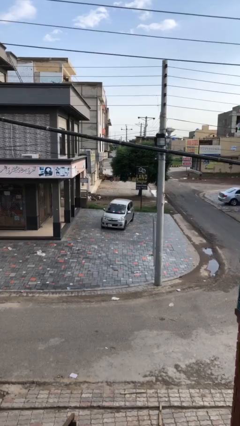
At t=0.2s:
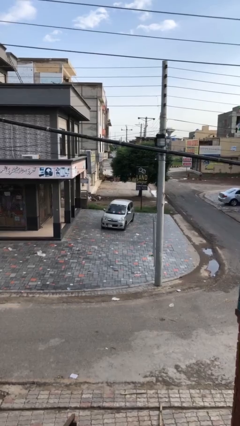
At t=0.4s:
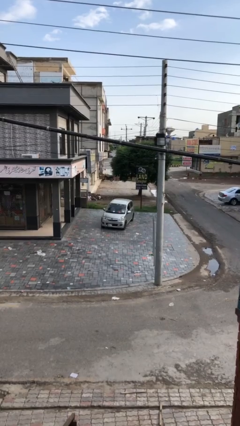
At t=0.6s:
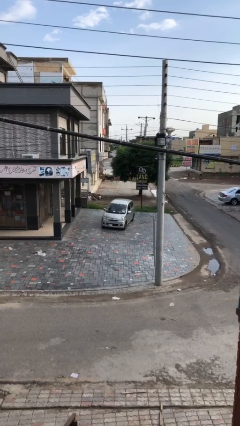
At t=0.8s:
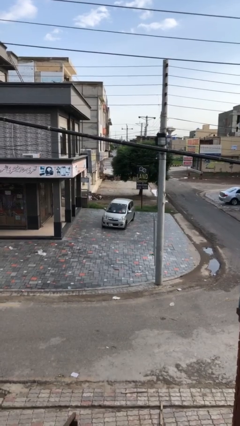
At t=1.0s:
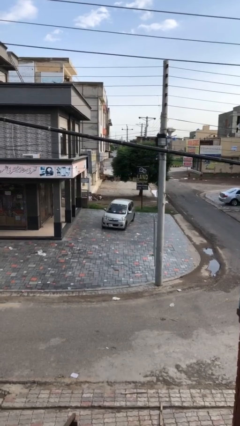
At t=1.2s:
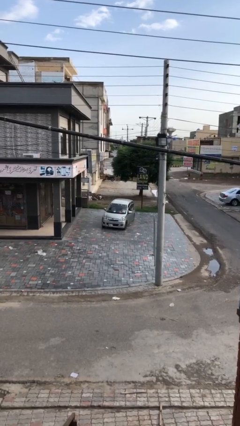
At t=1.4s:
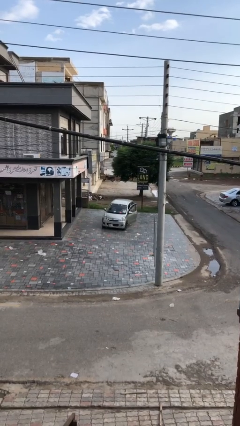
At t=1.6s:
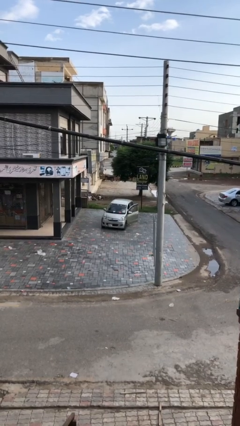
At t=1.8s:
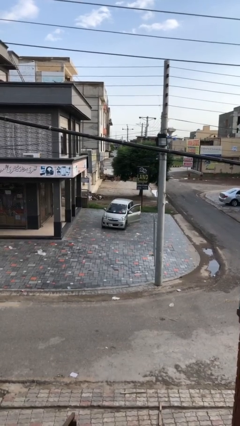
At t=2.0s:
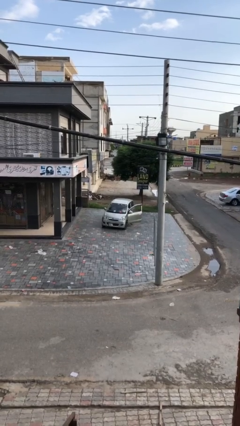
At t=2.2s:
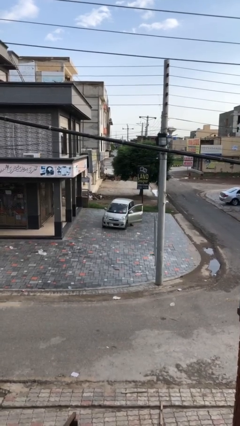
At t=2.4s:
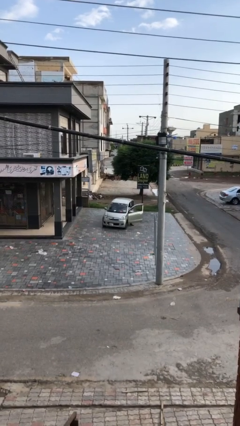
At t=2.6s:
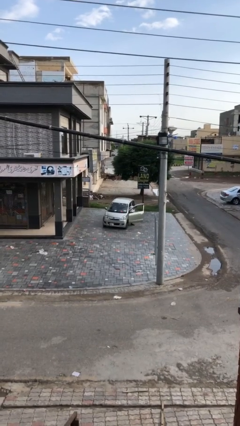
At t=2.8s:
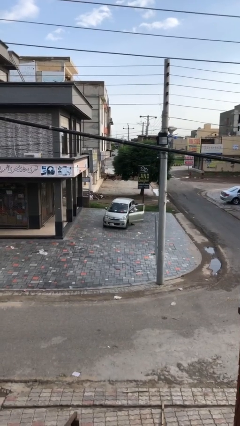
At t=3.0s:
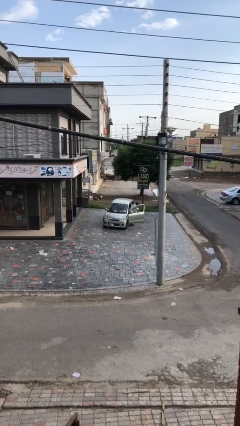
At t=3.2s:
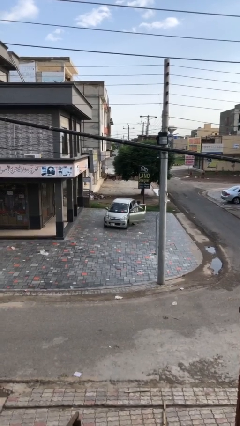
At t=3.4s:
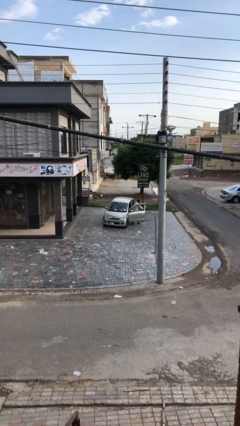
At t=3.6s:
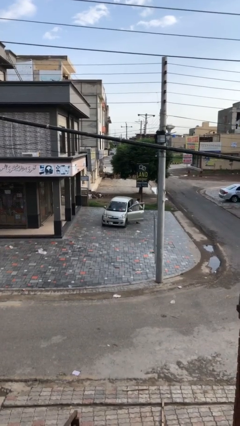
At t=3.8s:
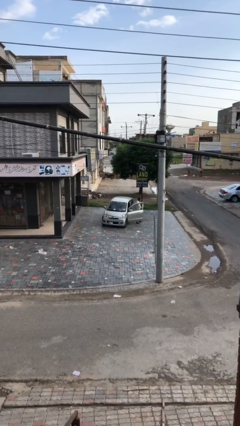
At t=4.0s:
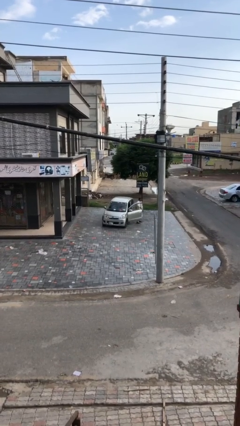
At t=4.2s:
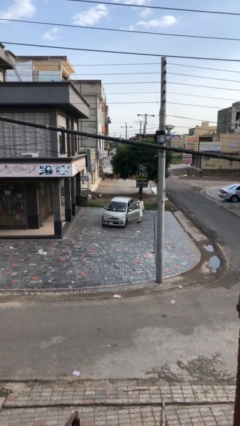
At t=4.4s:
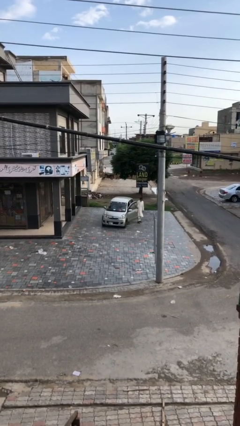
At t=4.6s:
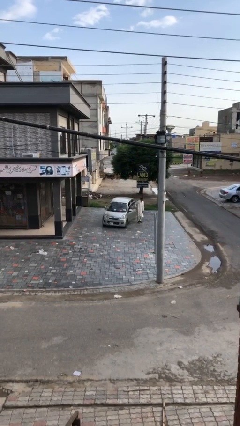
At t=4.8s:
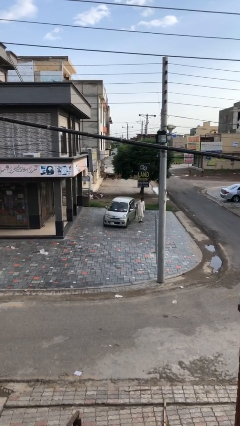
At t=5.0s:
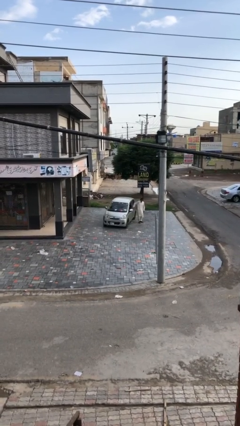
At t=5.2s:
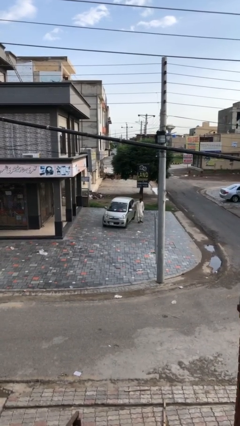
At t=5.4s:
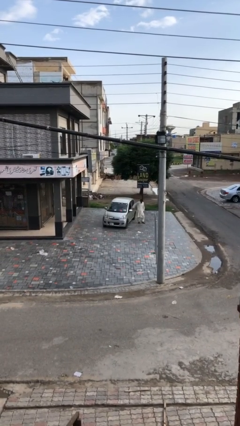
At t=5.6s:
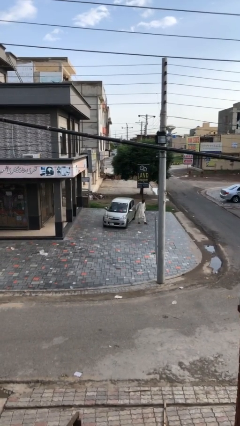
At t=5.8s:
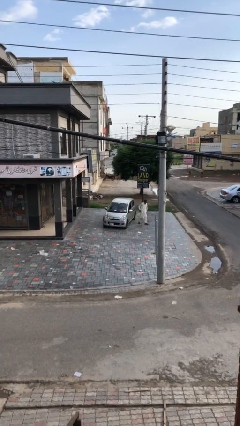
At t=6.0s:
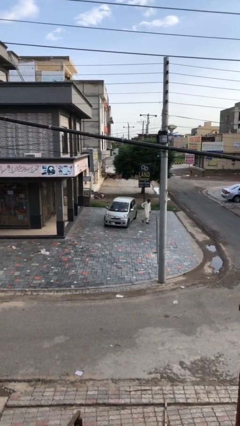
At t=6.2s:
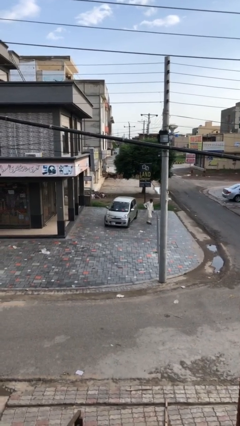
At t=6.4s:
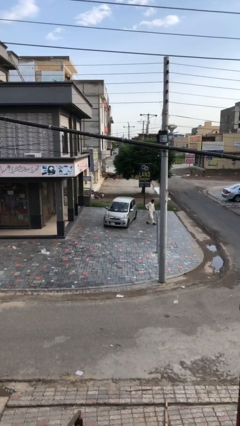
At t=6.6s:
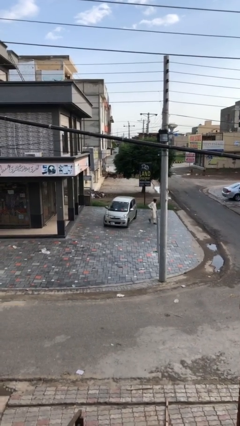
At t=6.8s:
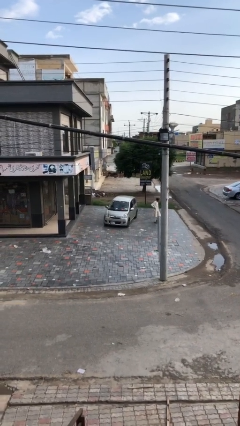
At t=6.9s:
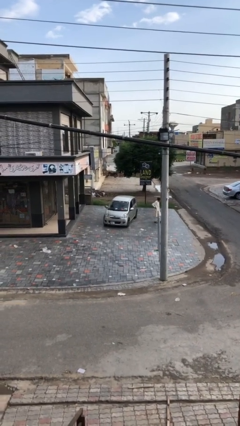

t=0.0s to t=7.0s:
car drops off person

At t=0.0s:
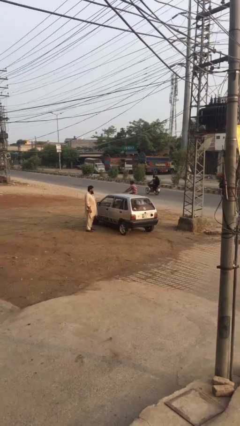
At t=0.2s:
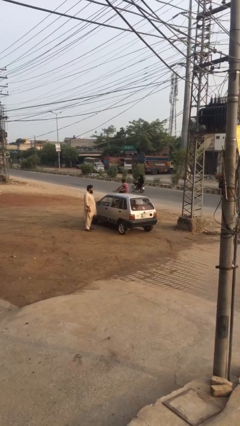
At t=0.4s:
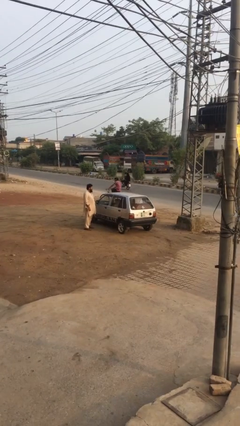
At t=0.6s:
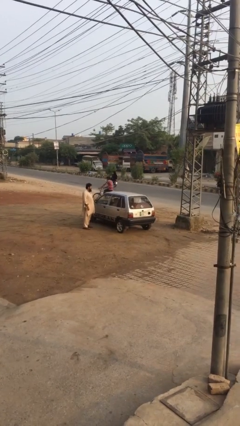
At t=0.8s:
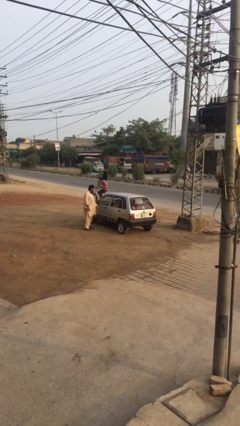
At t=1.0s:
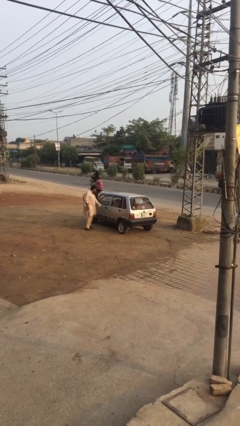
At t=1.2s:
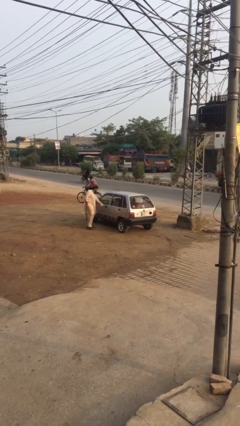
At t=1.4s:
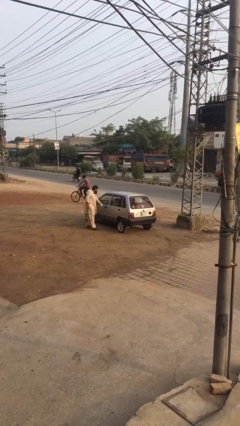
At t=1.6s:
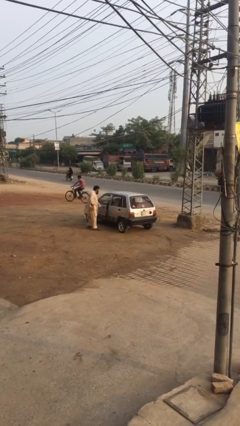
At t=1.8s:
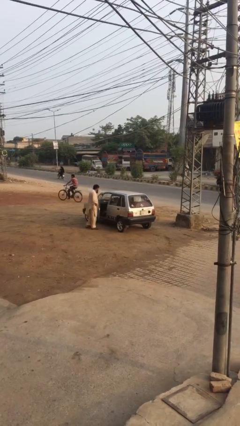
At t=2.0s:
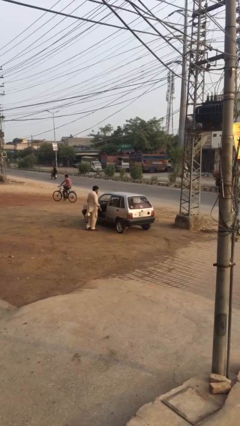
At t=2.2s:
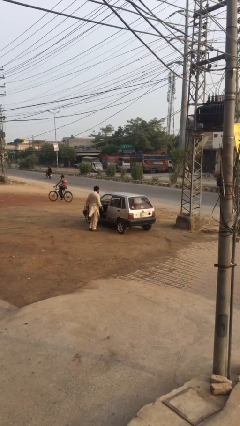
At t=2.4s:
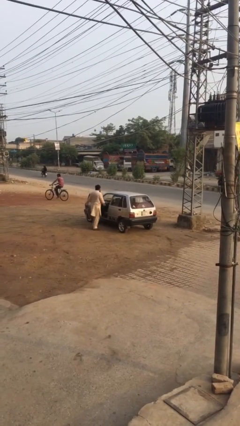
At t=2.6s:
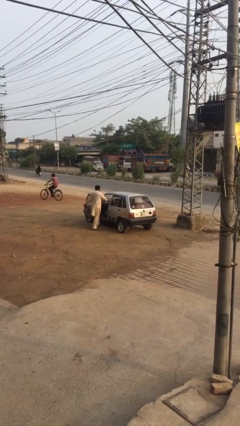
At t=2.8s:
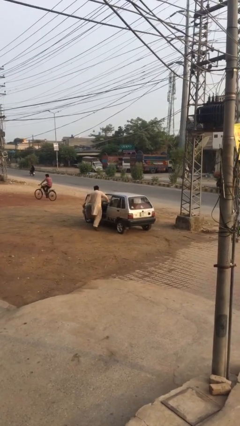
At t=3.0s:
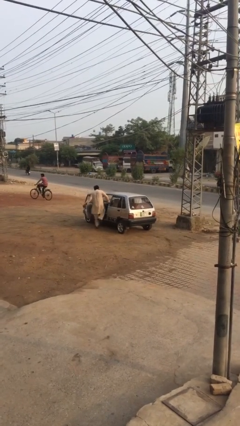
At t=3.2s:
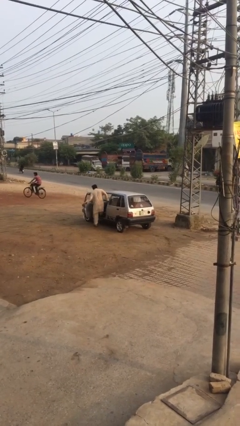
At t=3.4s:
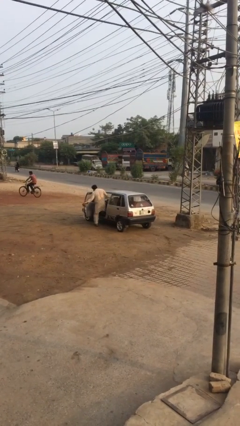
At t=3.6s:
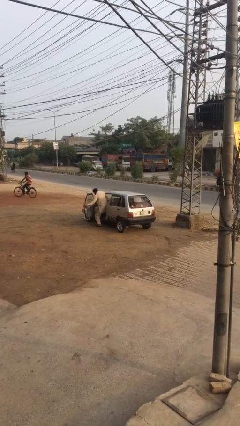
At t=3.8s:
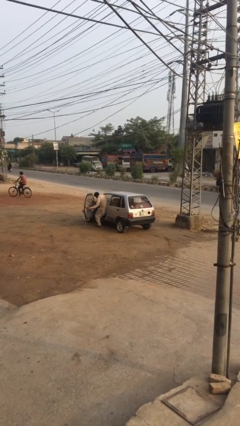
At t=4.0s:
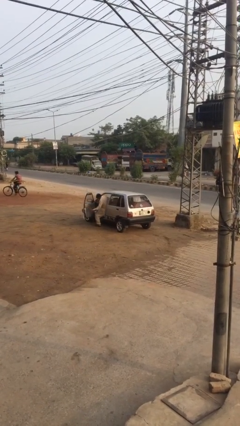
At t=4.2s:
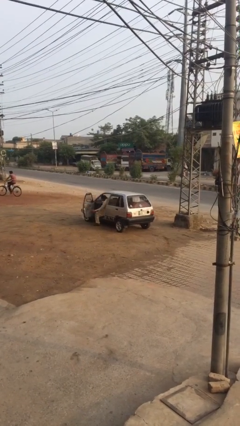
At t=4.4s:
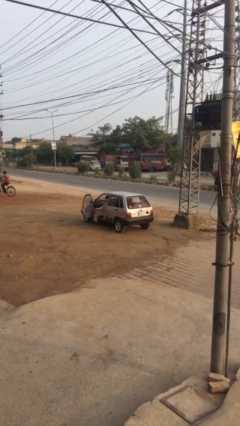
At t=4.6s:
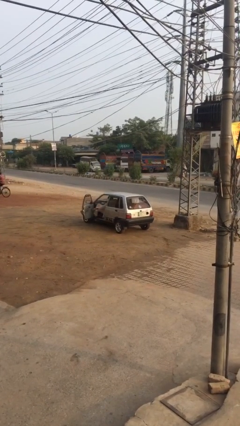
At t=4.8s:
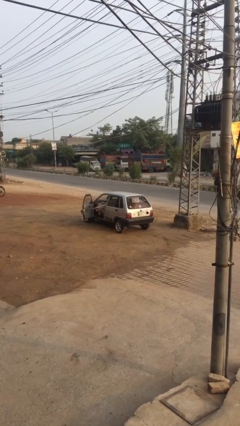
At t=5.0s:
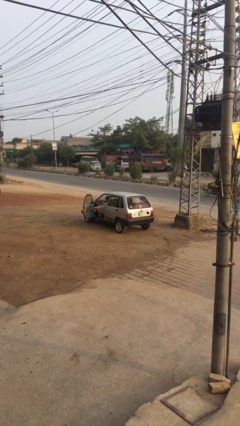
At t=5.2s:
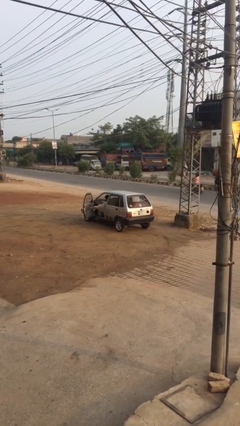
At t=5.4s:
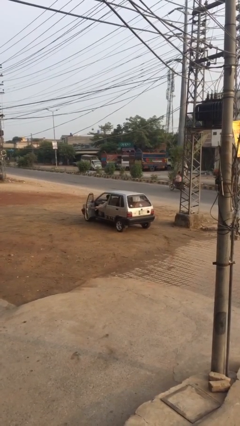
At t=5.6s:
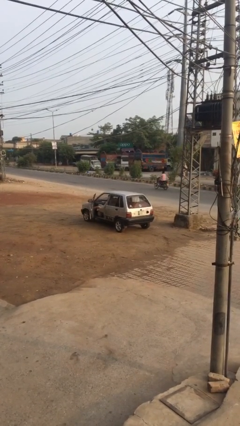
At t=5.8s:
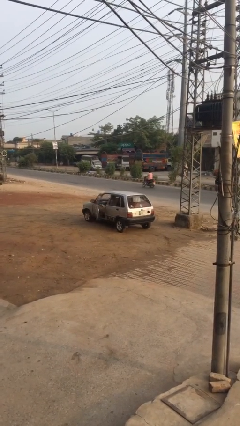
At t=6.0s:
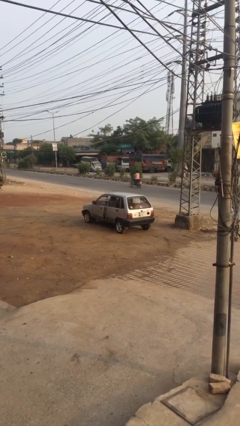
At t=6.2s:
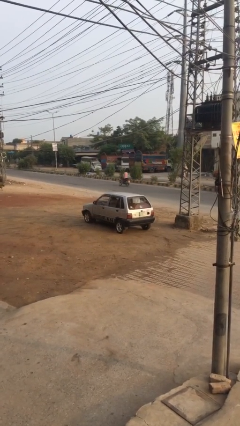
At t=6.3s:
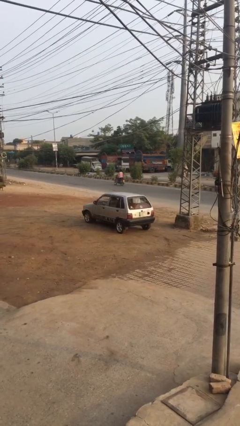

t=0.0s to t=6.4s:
car picks up person

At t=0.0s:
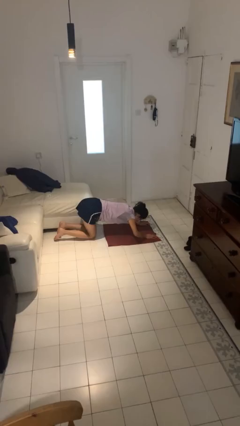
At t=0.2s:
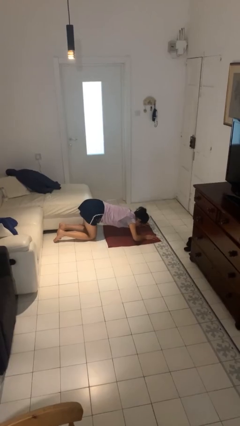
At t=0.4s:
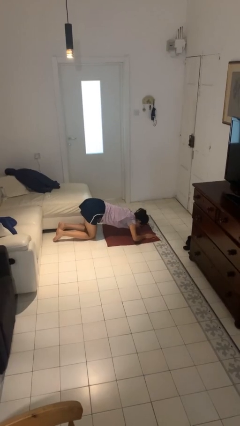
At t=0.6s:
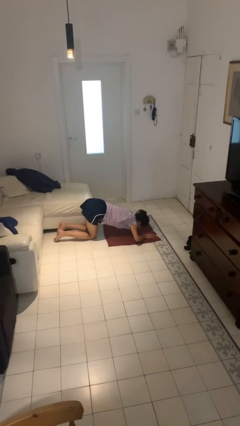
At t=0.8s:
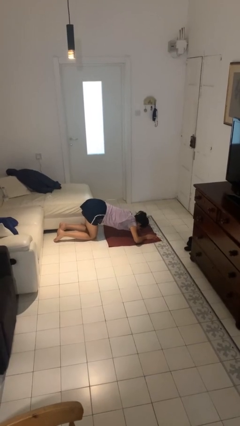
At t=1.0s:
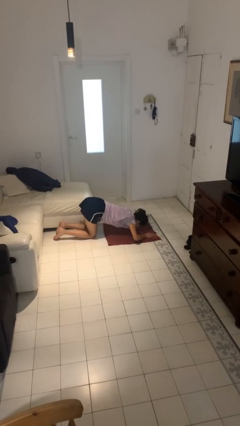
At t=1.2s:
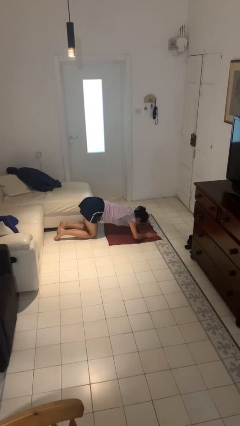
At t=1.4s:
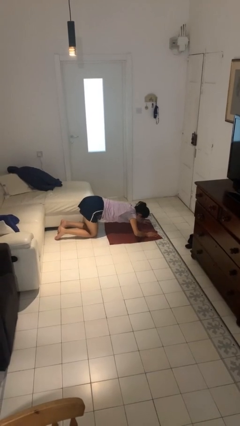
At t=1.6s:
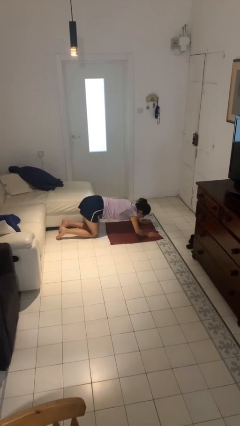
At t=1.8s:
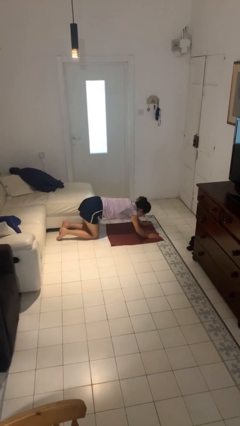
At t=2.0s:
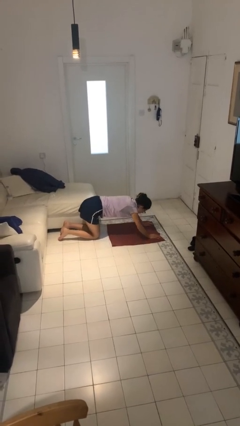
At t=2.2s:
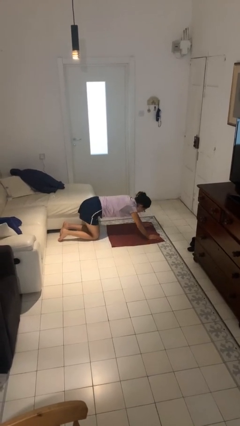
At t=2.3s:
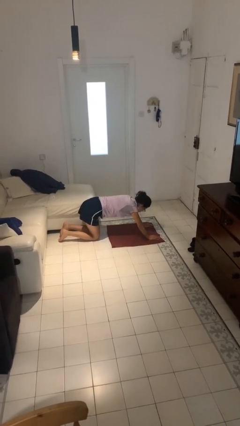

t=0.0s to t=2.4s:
person exercises with pushup

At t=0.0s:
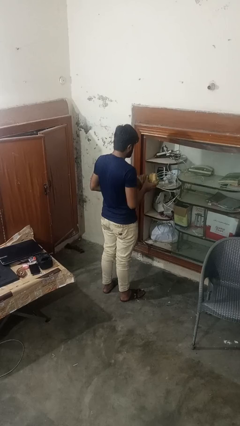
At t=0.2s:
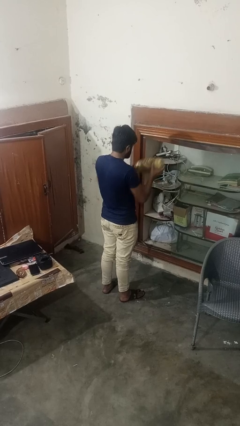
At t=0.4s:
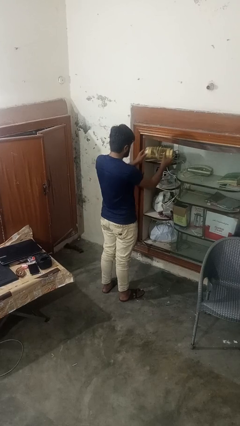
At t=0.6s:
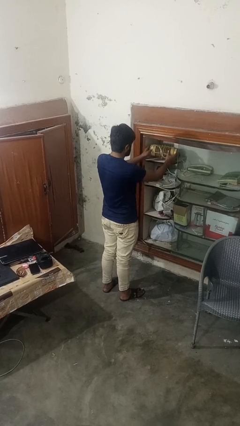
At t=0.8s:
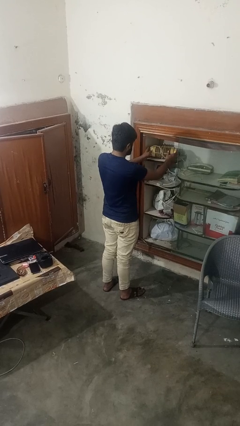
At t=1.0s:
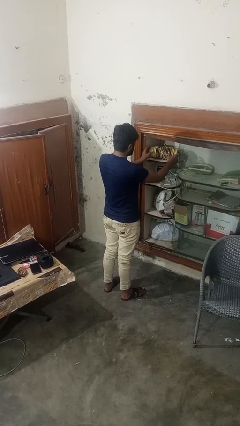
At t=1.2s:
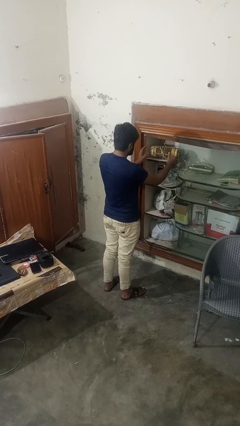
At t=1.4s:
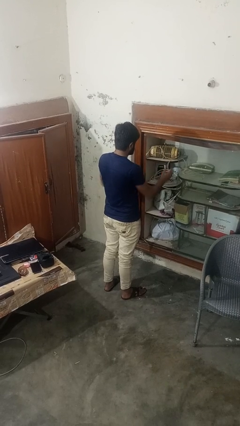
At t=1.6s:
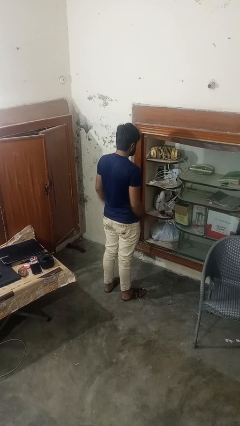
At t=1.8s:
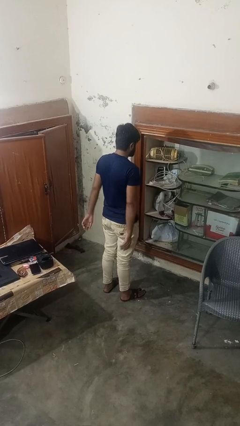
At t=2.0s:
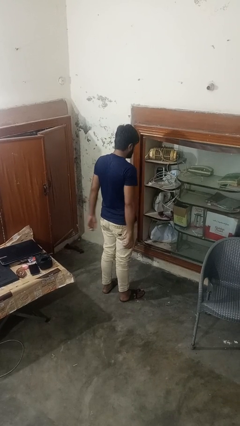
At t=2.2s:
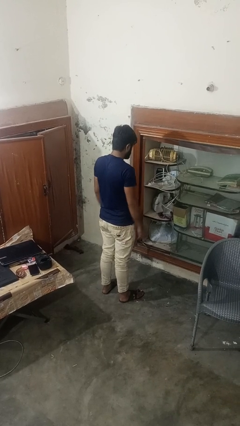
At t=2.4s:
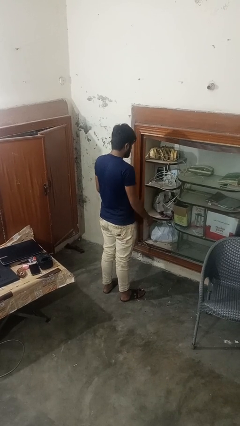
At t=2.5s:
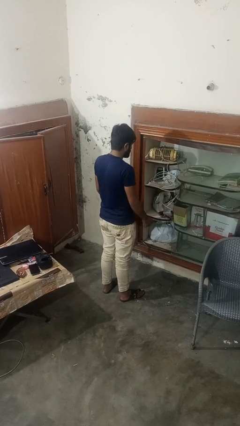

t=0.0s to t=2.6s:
person puts down object on countertop
